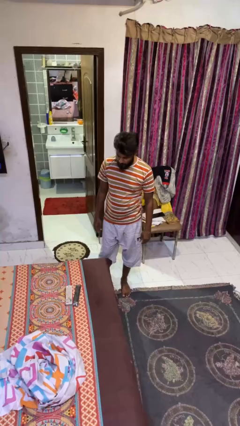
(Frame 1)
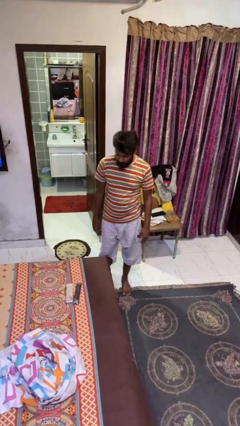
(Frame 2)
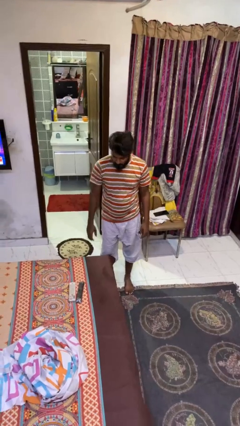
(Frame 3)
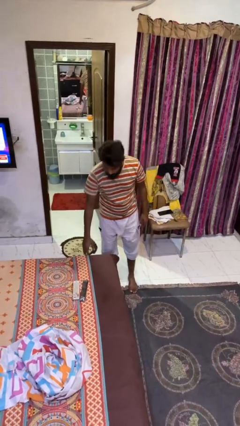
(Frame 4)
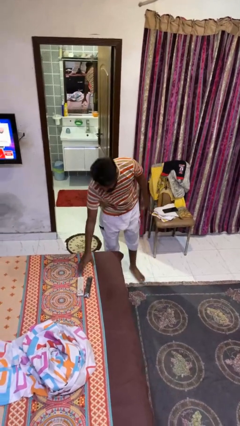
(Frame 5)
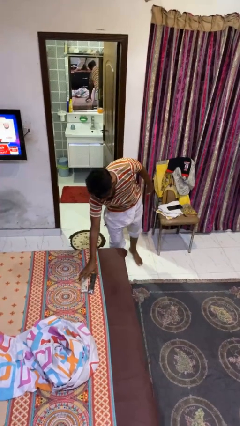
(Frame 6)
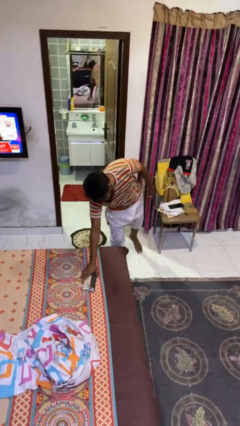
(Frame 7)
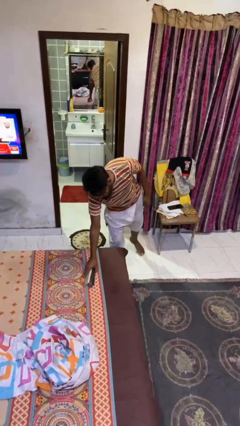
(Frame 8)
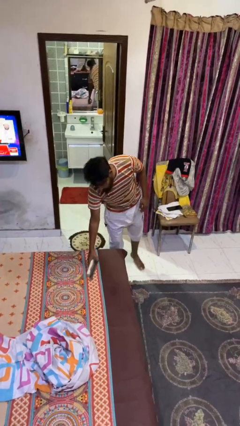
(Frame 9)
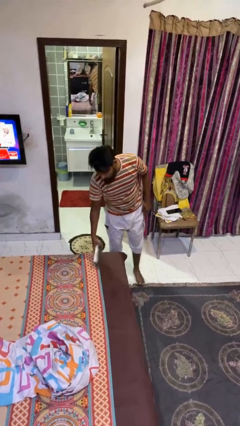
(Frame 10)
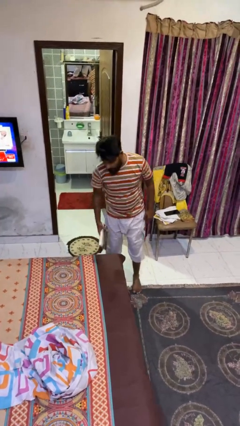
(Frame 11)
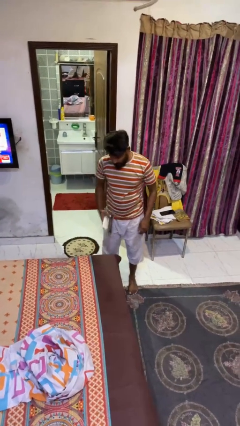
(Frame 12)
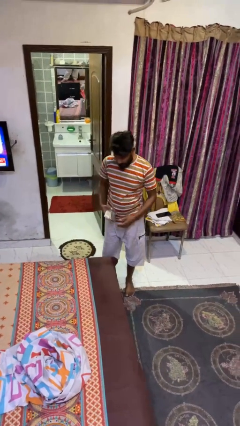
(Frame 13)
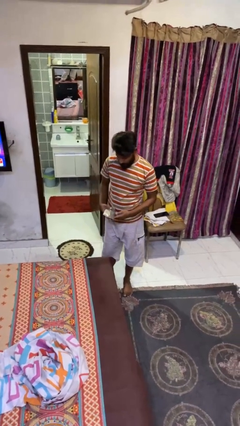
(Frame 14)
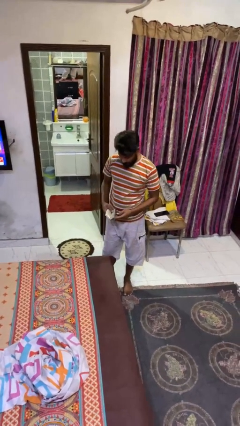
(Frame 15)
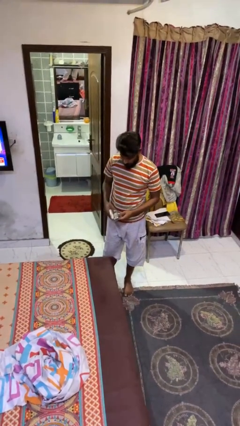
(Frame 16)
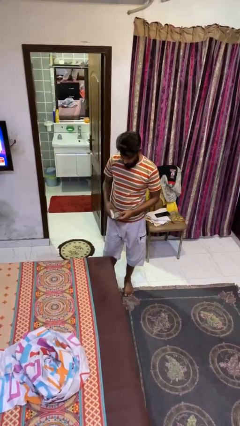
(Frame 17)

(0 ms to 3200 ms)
person picks up object from bed

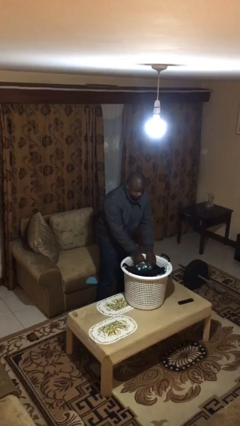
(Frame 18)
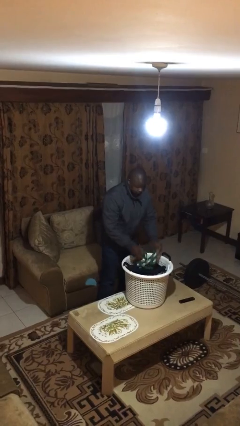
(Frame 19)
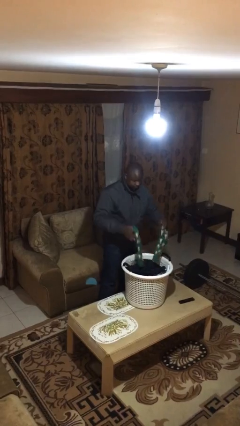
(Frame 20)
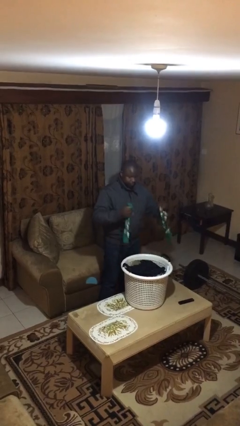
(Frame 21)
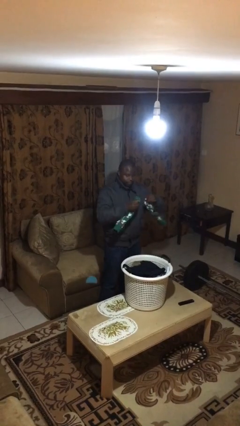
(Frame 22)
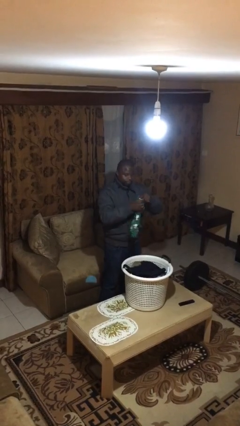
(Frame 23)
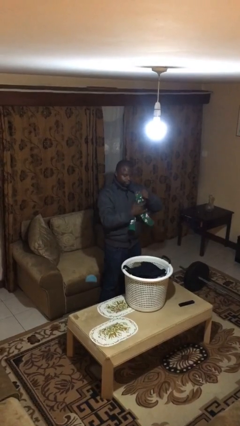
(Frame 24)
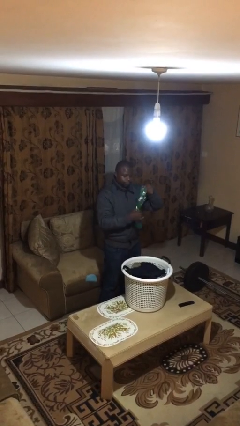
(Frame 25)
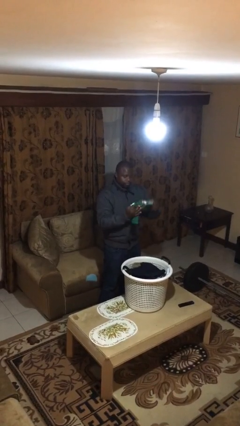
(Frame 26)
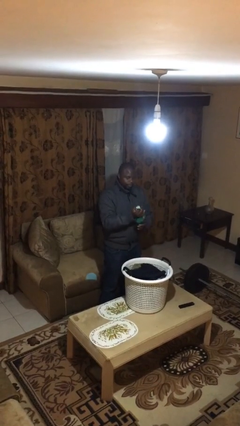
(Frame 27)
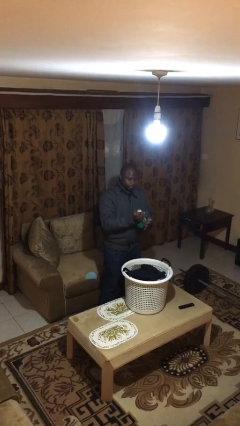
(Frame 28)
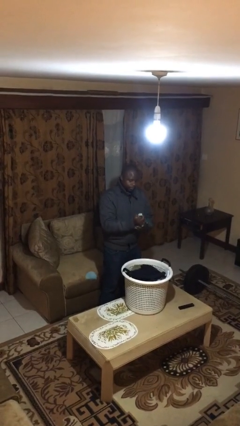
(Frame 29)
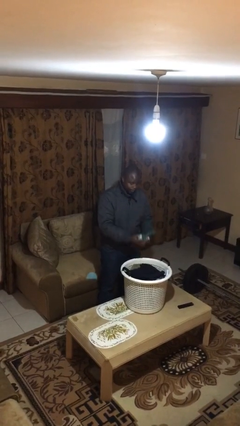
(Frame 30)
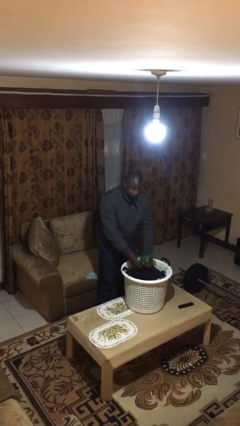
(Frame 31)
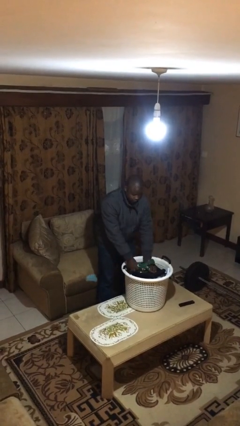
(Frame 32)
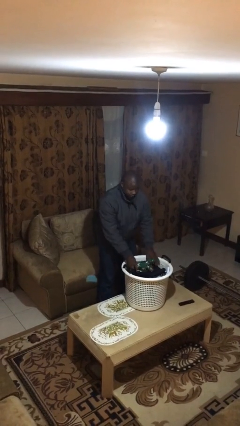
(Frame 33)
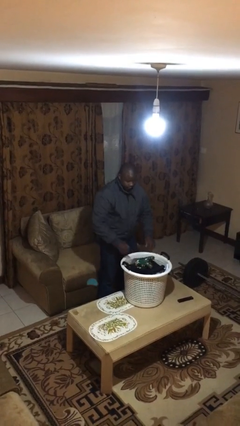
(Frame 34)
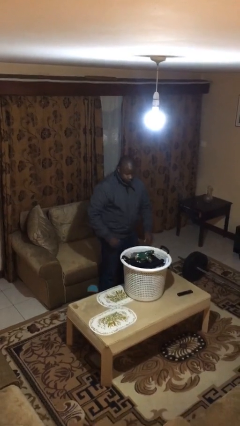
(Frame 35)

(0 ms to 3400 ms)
person folds socks

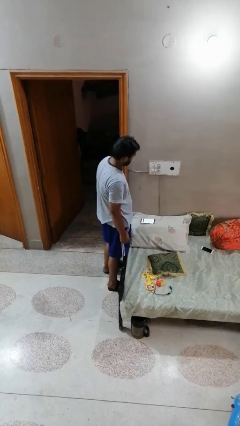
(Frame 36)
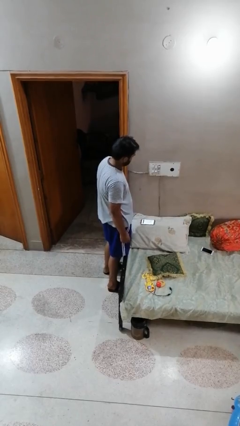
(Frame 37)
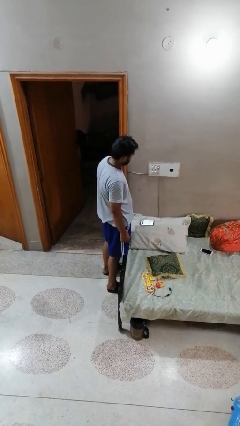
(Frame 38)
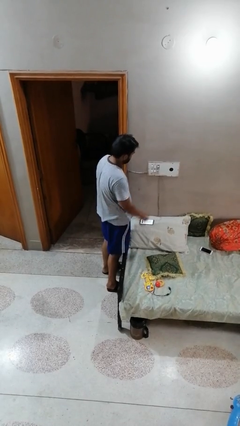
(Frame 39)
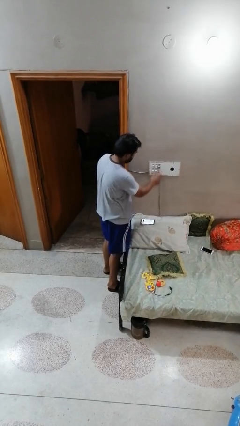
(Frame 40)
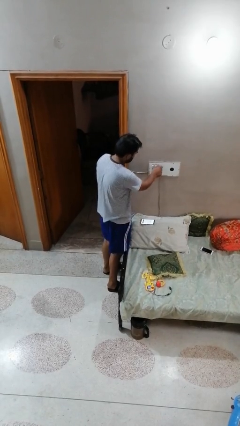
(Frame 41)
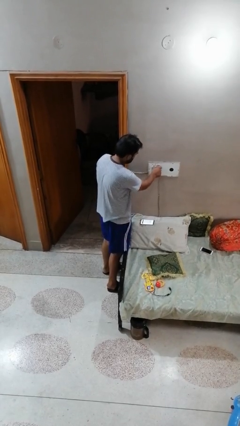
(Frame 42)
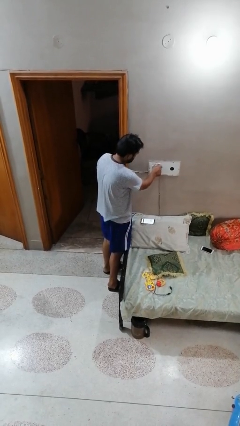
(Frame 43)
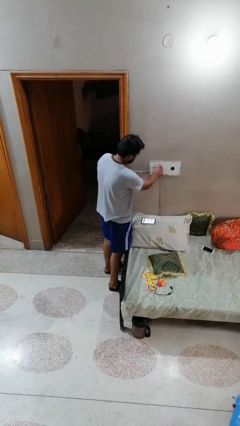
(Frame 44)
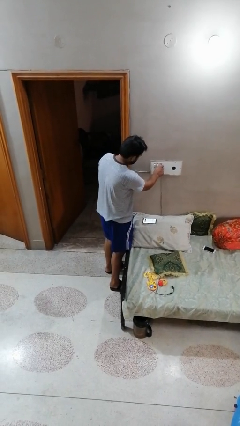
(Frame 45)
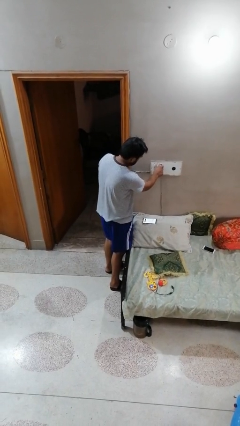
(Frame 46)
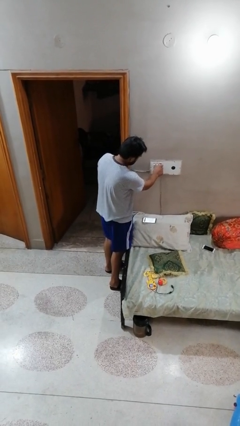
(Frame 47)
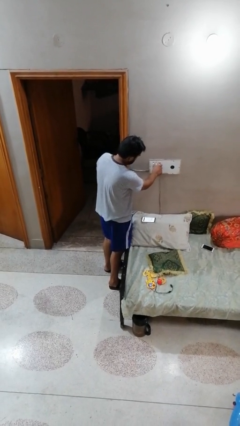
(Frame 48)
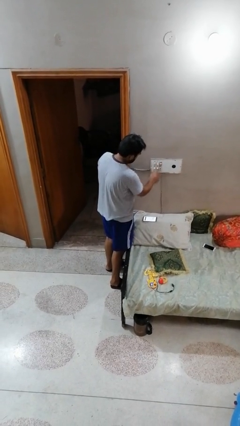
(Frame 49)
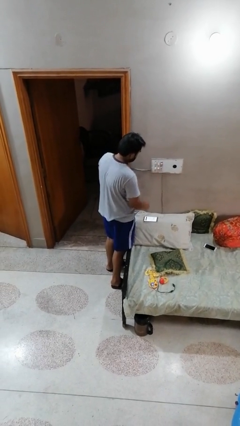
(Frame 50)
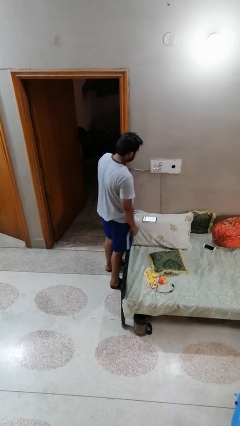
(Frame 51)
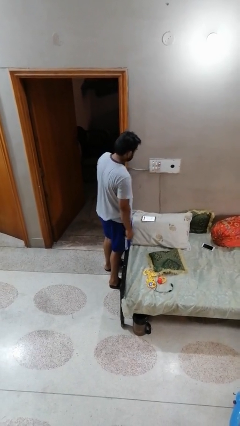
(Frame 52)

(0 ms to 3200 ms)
person adjusts thermostat

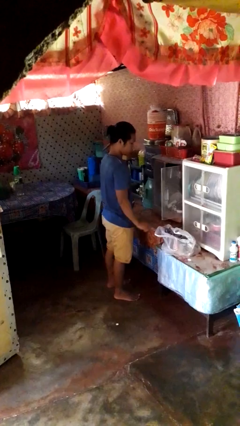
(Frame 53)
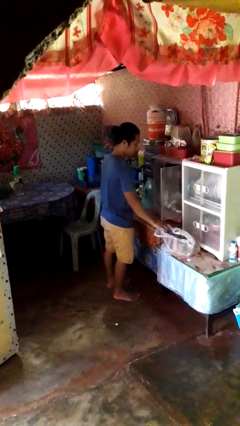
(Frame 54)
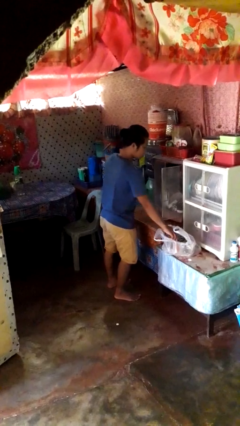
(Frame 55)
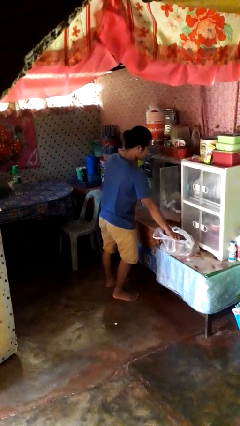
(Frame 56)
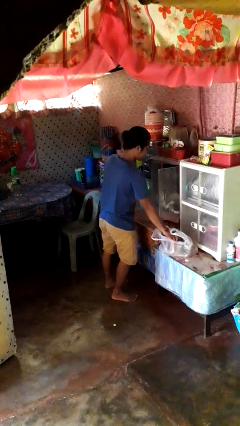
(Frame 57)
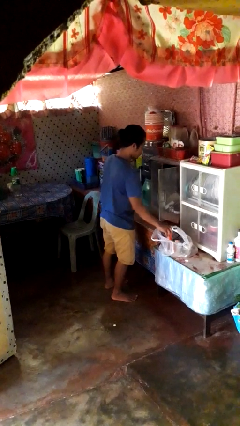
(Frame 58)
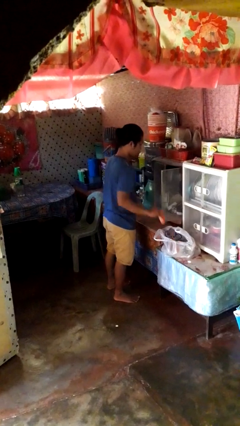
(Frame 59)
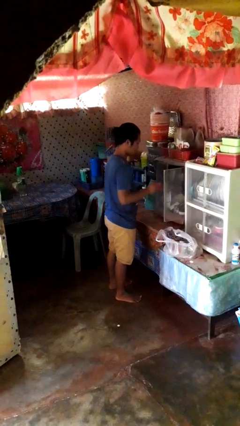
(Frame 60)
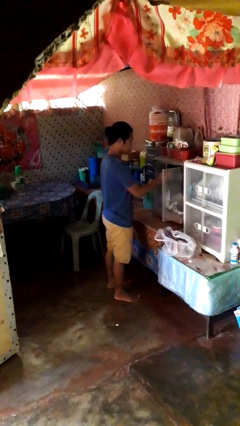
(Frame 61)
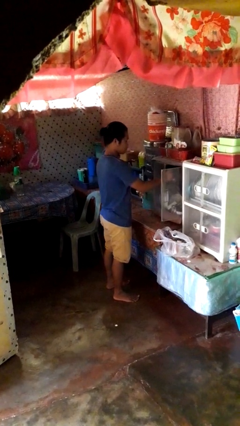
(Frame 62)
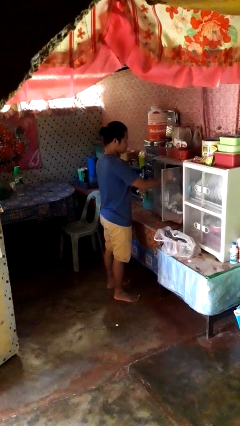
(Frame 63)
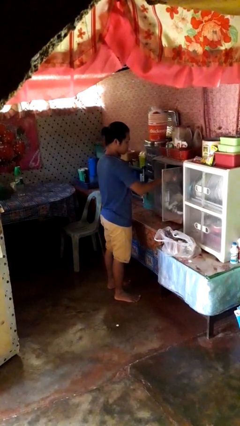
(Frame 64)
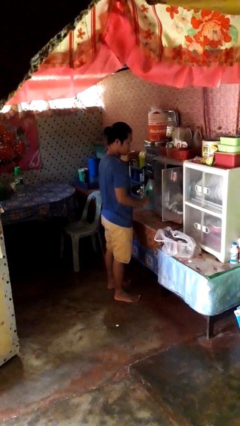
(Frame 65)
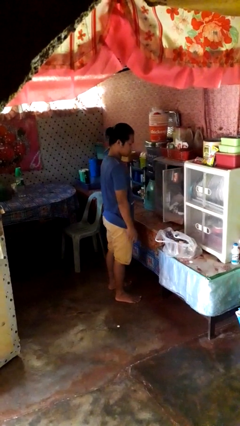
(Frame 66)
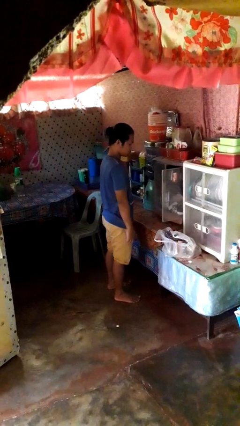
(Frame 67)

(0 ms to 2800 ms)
person loads groceries into cabinet

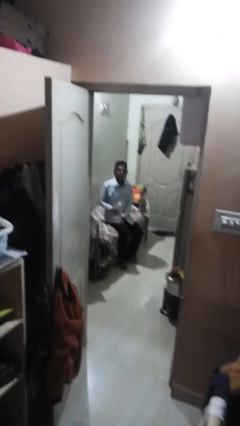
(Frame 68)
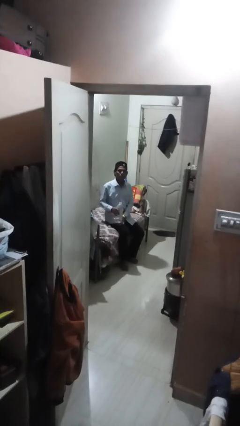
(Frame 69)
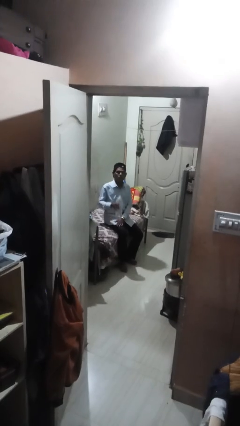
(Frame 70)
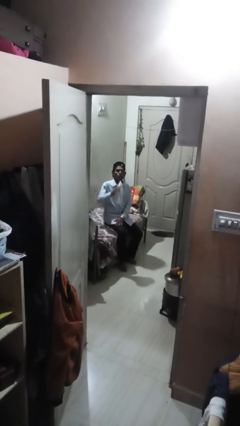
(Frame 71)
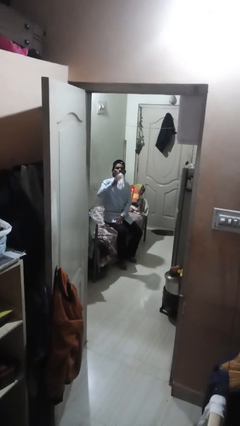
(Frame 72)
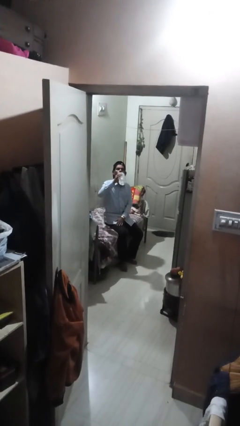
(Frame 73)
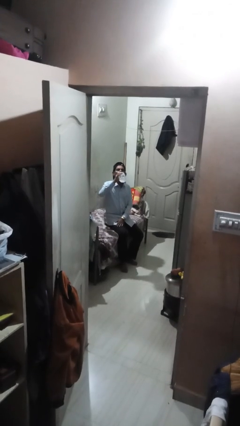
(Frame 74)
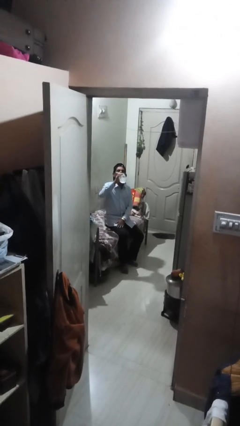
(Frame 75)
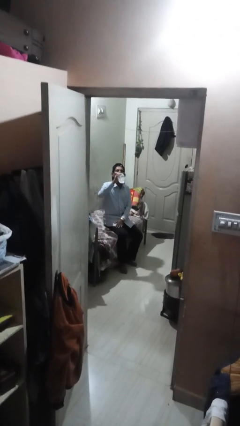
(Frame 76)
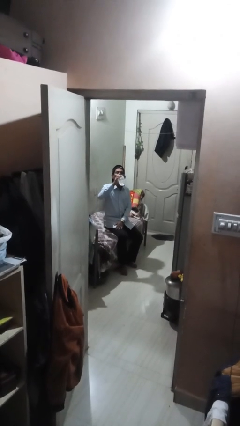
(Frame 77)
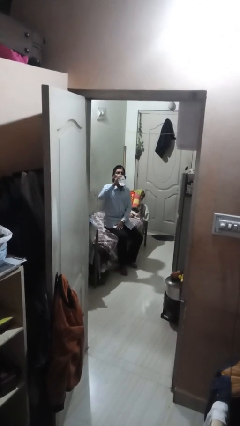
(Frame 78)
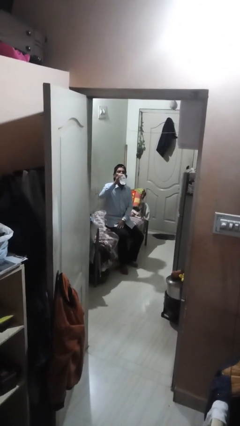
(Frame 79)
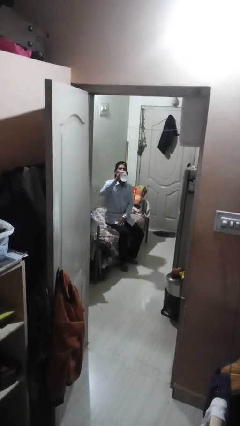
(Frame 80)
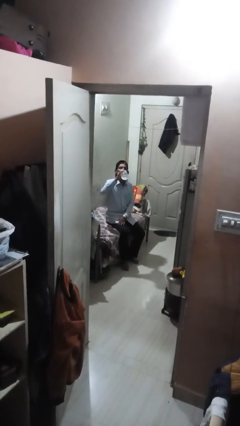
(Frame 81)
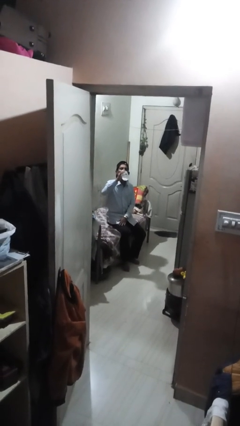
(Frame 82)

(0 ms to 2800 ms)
person drinks from bottle

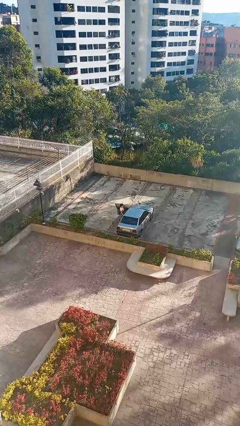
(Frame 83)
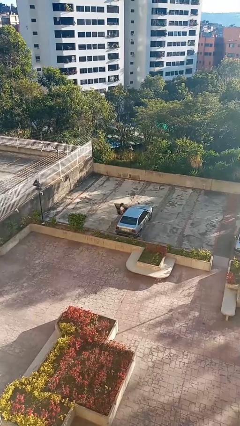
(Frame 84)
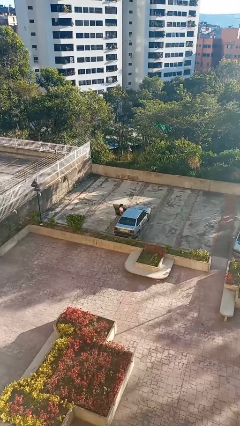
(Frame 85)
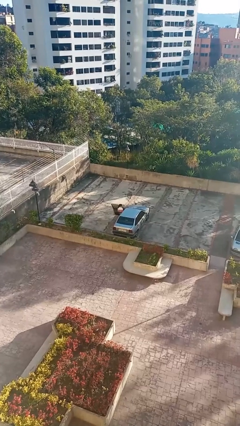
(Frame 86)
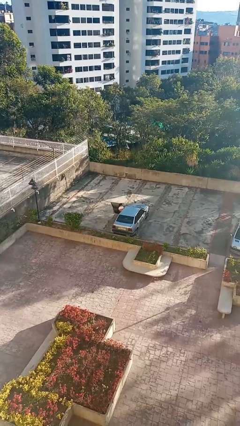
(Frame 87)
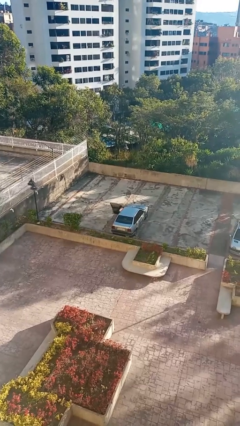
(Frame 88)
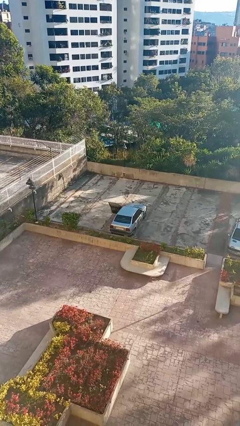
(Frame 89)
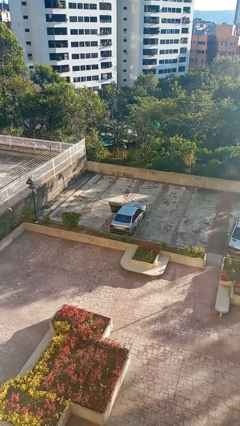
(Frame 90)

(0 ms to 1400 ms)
person enters car

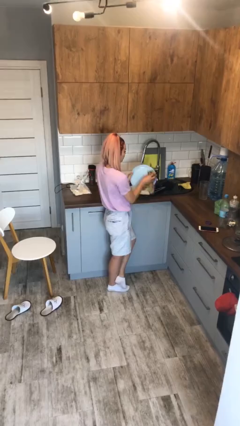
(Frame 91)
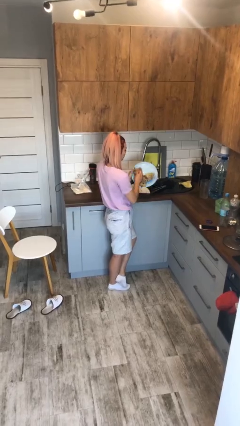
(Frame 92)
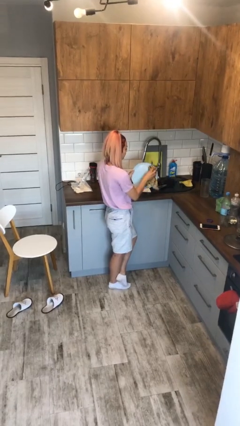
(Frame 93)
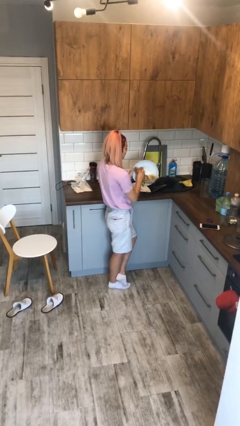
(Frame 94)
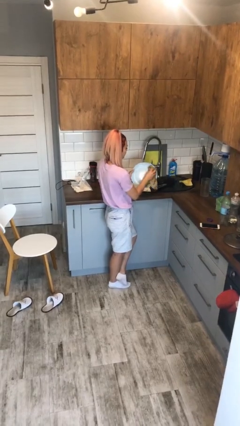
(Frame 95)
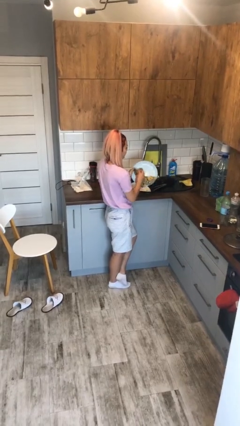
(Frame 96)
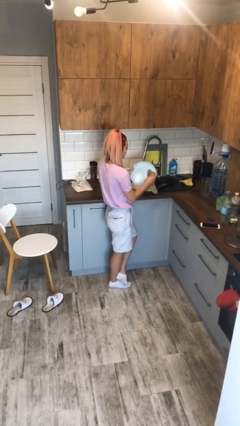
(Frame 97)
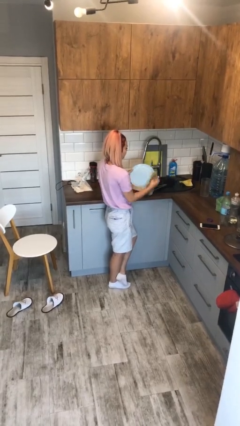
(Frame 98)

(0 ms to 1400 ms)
person dries dish
